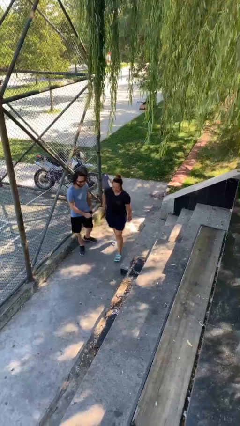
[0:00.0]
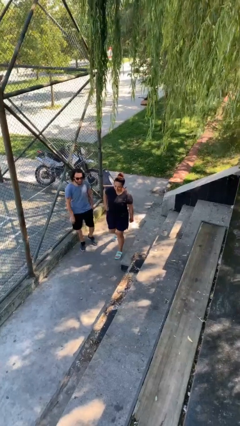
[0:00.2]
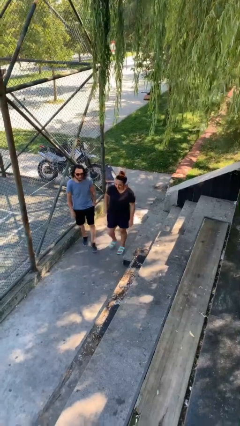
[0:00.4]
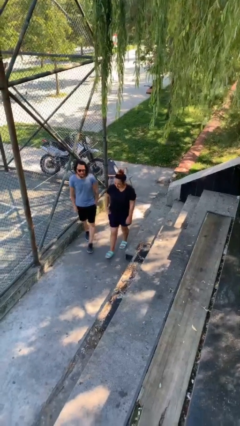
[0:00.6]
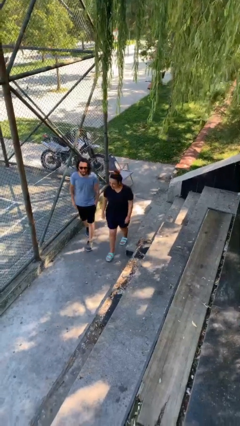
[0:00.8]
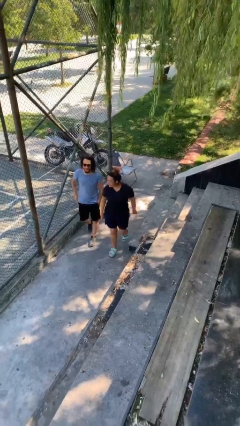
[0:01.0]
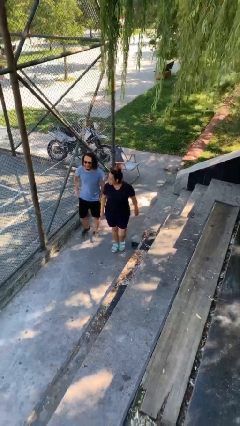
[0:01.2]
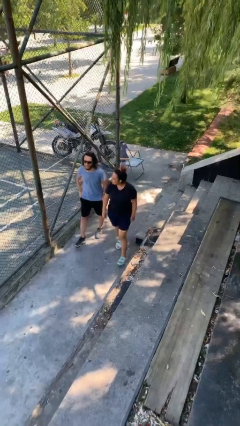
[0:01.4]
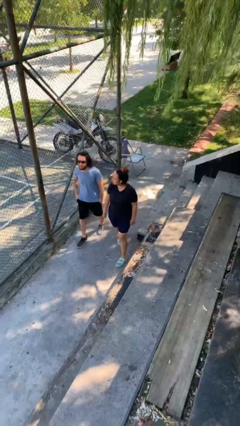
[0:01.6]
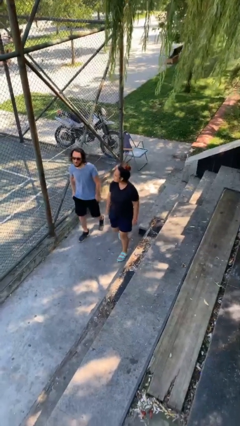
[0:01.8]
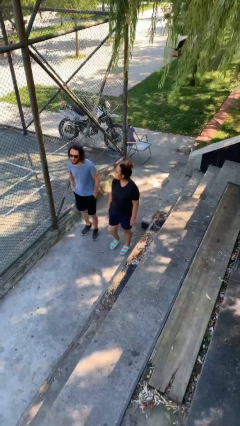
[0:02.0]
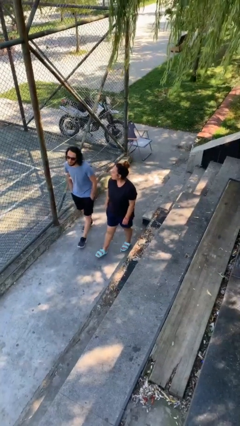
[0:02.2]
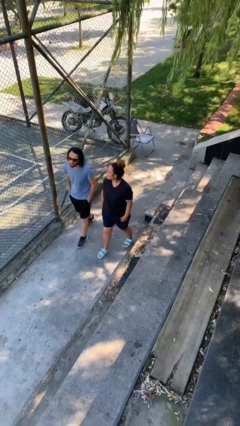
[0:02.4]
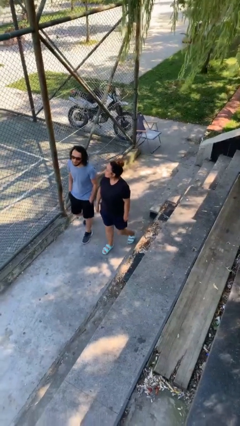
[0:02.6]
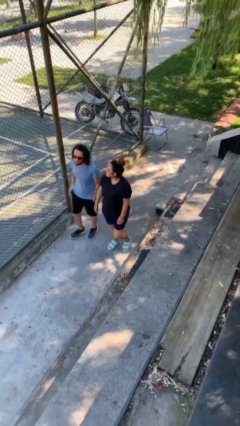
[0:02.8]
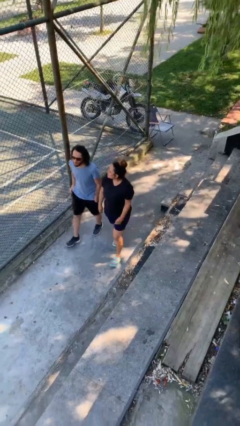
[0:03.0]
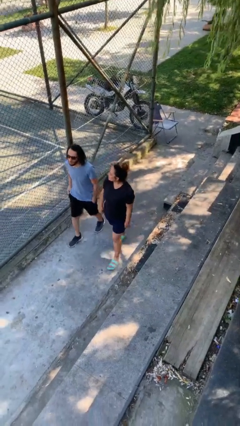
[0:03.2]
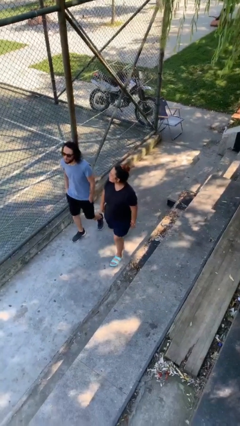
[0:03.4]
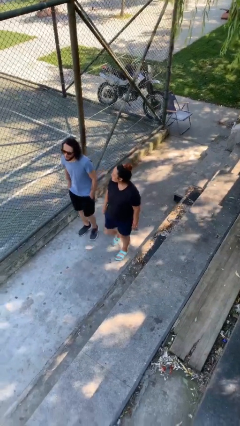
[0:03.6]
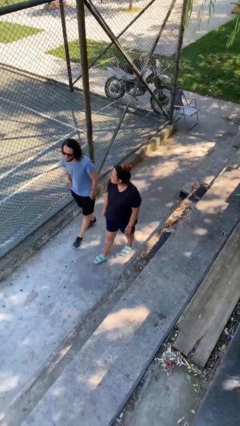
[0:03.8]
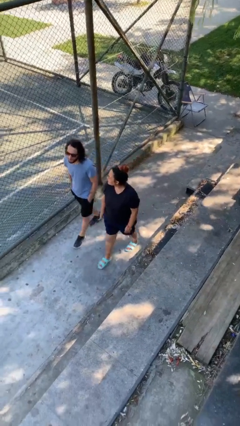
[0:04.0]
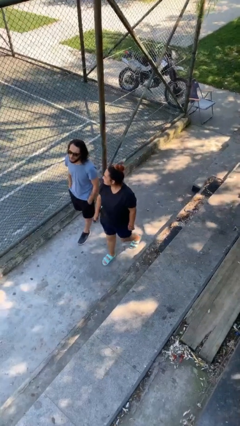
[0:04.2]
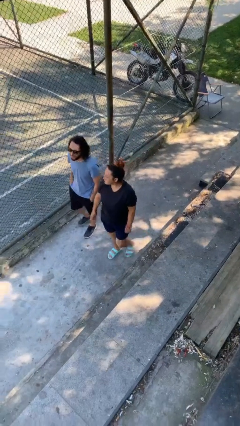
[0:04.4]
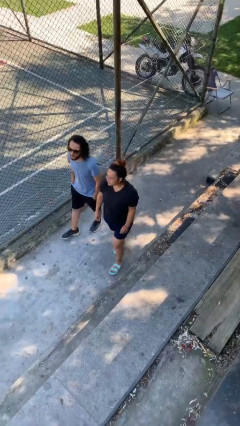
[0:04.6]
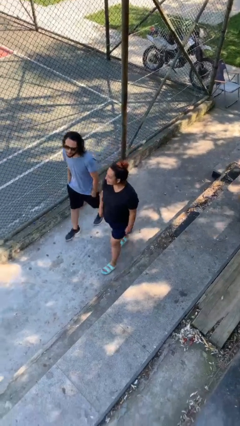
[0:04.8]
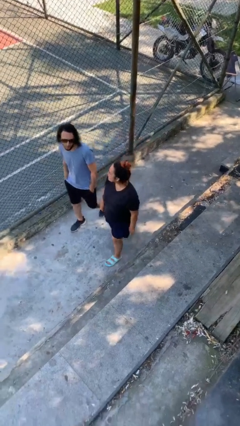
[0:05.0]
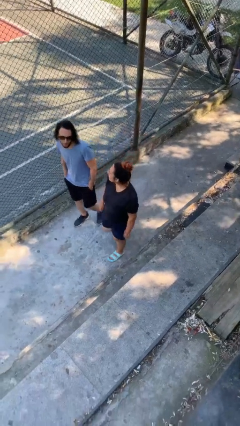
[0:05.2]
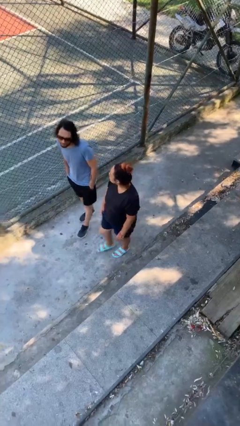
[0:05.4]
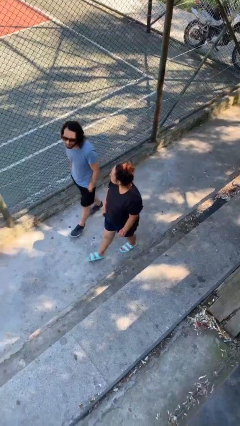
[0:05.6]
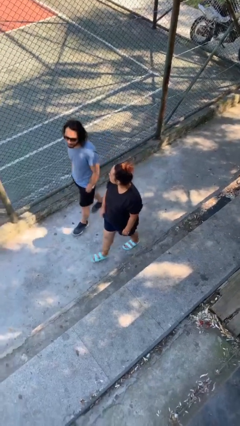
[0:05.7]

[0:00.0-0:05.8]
person talks to person

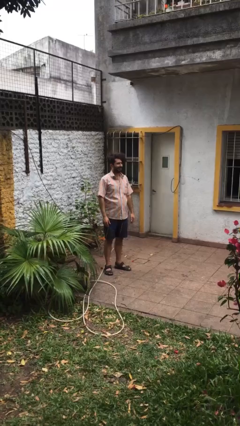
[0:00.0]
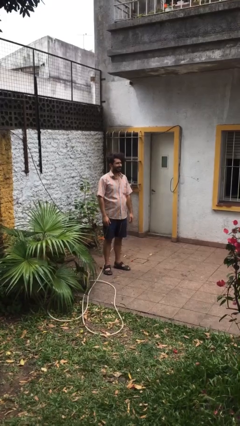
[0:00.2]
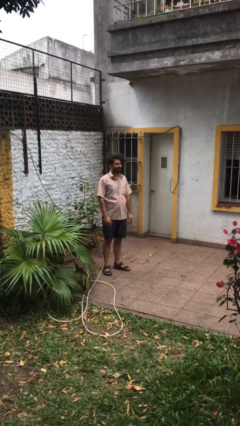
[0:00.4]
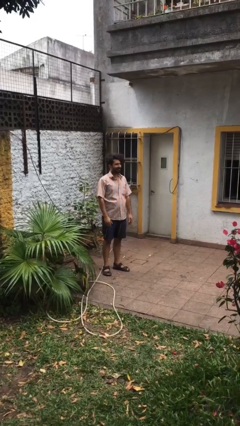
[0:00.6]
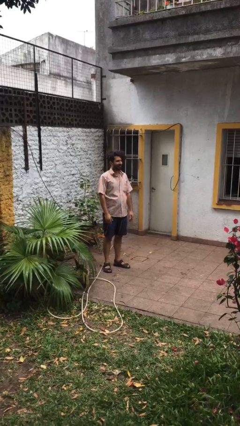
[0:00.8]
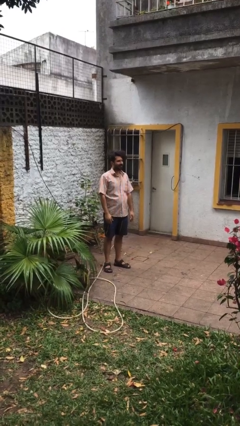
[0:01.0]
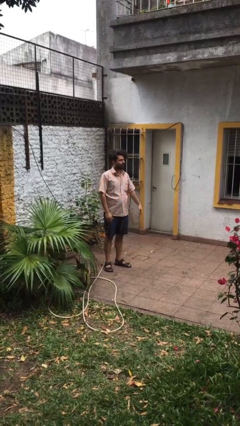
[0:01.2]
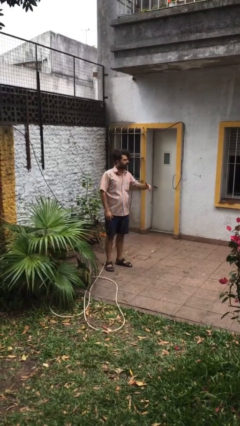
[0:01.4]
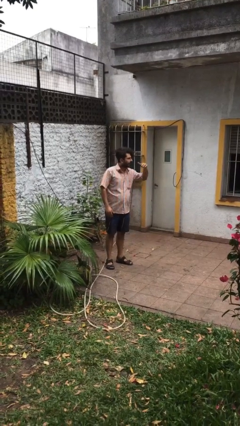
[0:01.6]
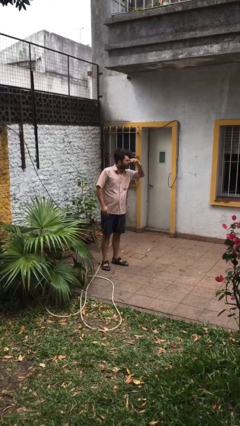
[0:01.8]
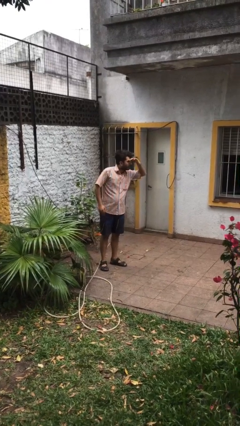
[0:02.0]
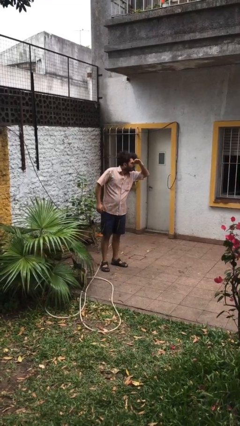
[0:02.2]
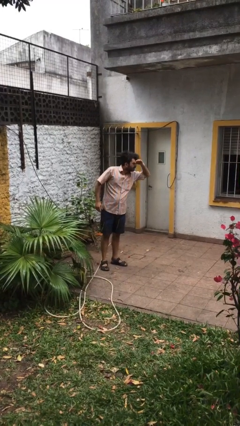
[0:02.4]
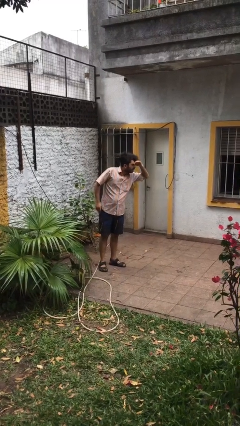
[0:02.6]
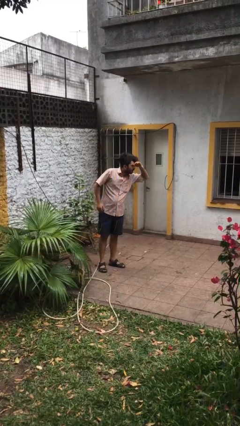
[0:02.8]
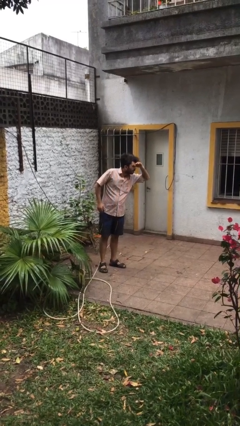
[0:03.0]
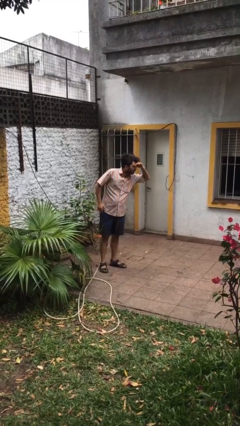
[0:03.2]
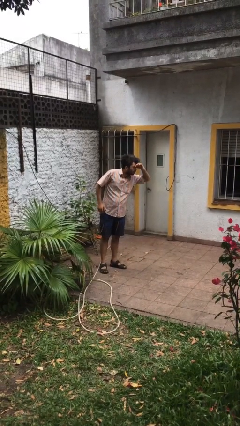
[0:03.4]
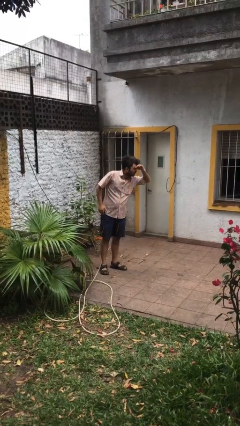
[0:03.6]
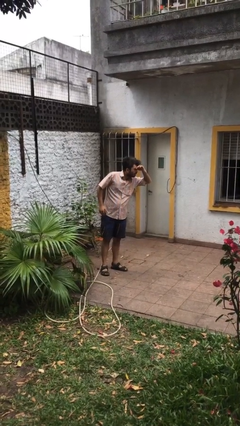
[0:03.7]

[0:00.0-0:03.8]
person shades eyes

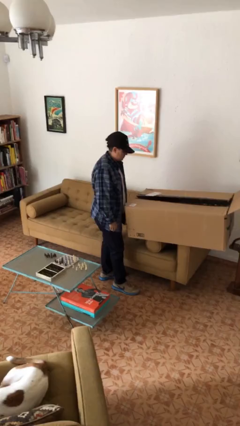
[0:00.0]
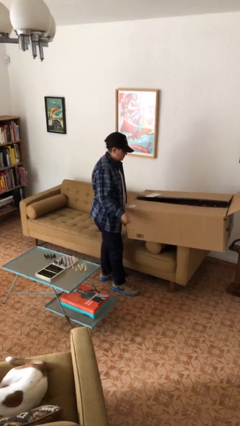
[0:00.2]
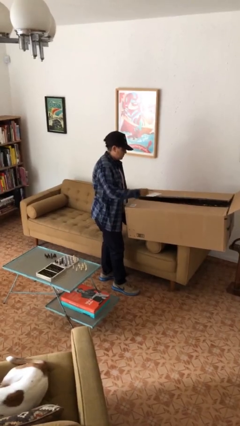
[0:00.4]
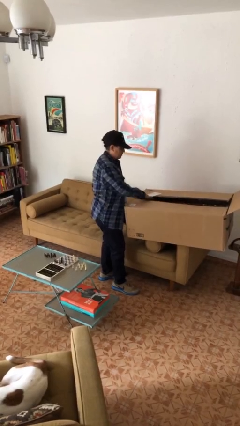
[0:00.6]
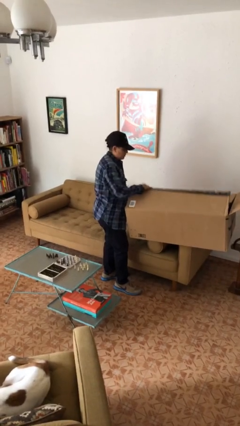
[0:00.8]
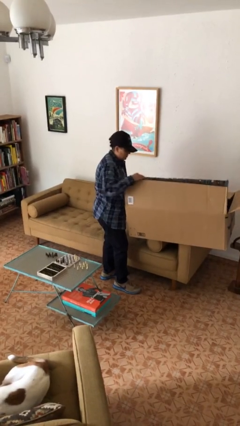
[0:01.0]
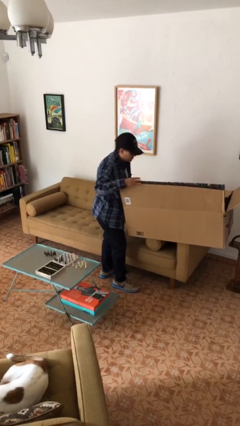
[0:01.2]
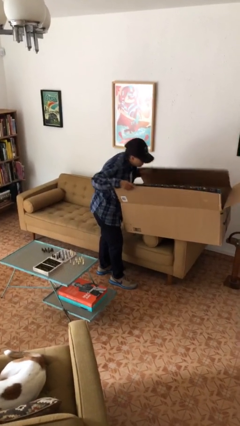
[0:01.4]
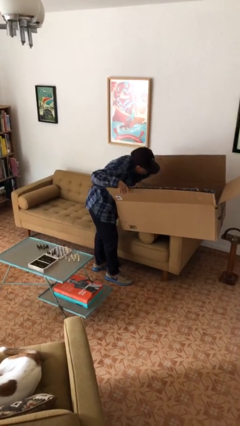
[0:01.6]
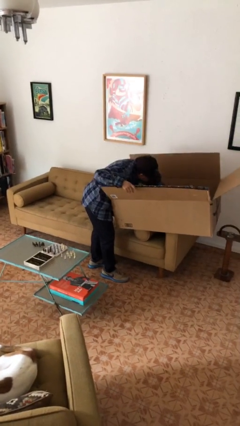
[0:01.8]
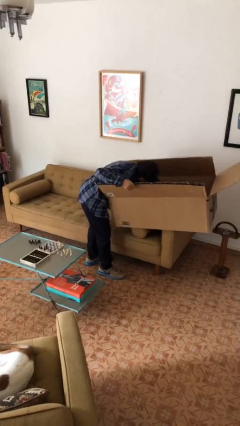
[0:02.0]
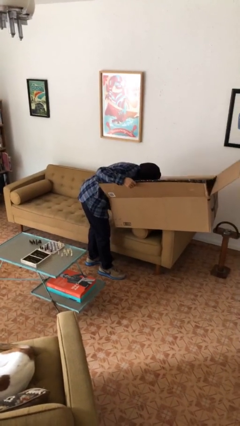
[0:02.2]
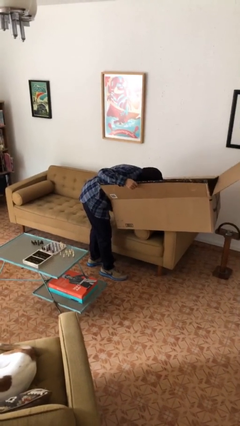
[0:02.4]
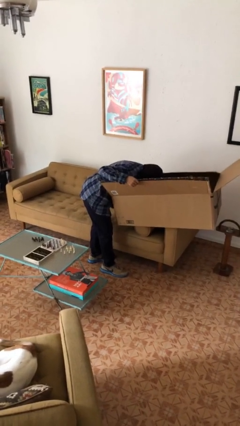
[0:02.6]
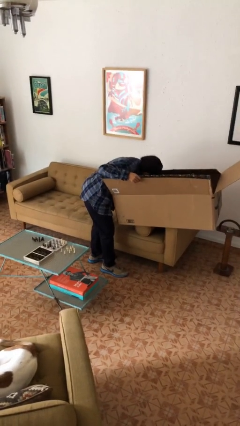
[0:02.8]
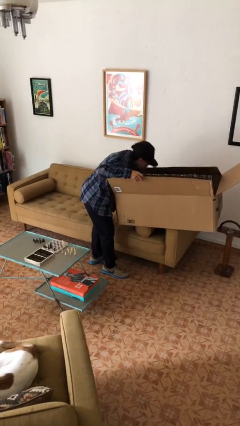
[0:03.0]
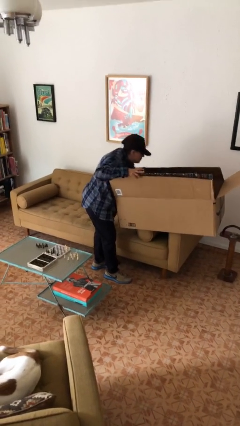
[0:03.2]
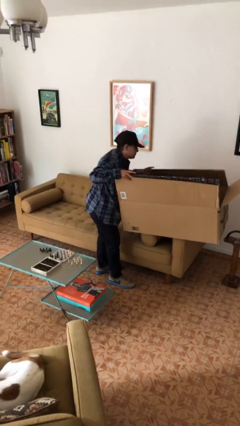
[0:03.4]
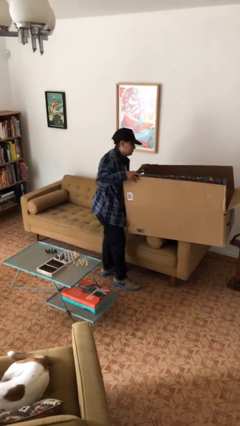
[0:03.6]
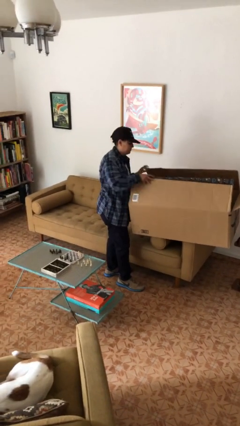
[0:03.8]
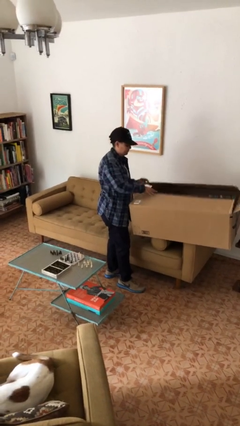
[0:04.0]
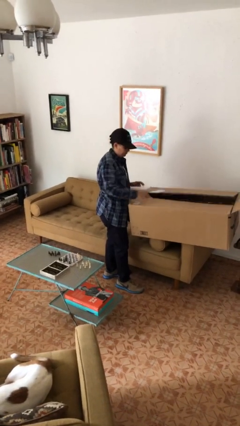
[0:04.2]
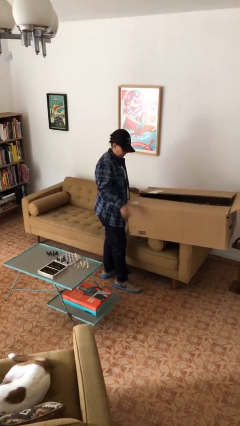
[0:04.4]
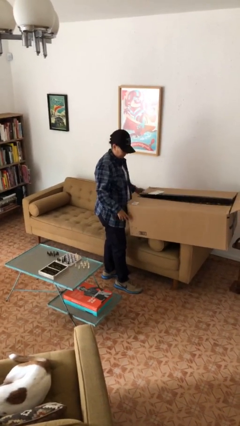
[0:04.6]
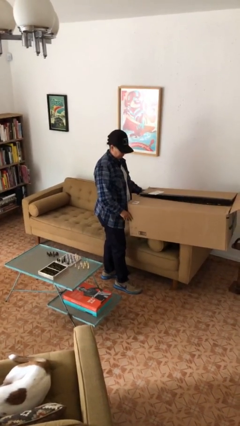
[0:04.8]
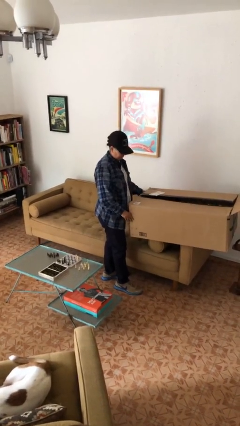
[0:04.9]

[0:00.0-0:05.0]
person searches in box

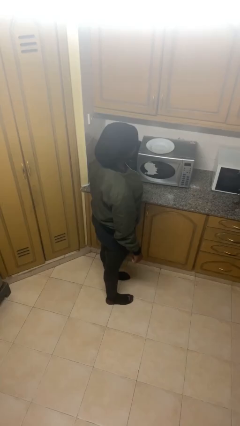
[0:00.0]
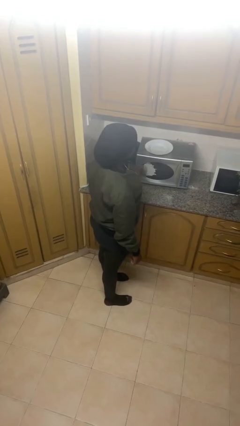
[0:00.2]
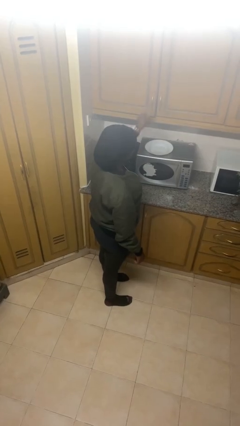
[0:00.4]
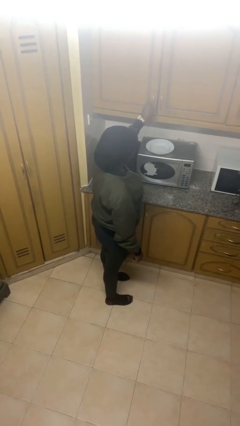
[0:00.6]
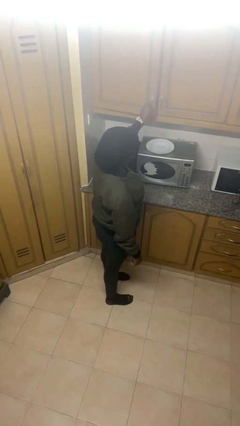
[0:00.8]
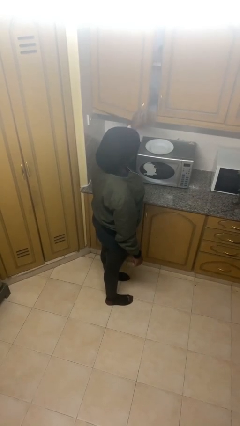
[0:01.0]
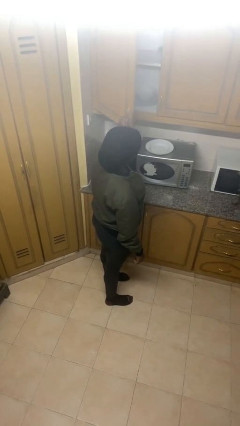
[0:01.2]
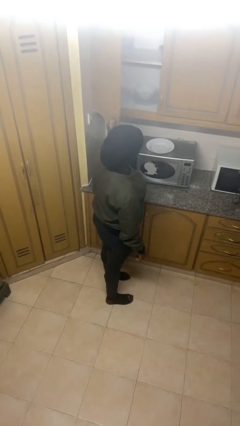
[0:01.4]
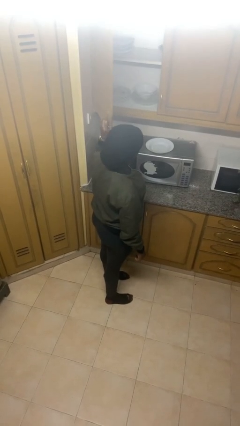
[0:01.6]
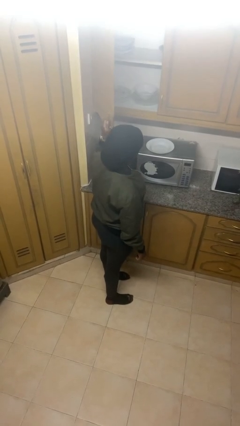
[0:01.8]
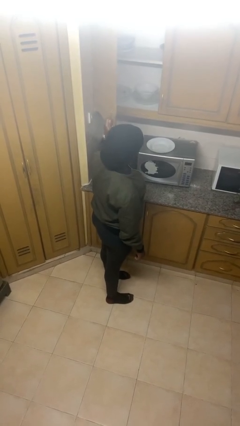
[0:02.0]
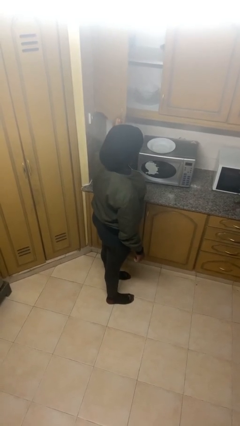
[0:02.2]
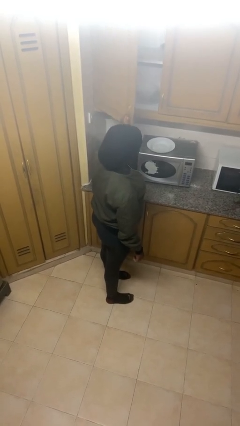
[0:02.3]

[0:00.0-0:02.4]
person opens cabinet

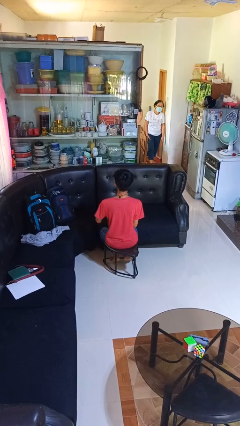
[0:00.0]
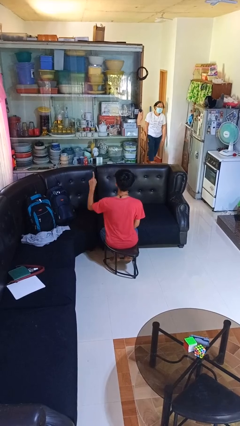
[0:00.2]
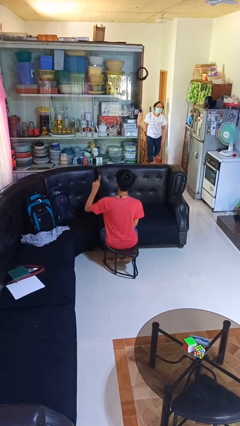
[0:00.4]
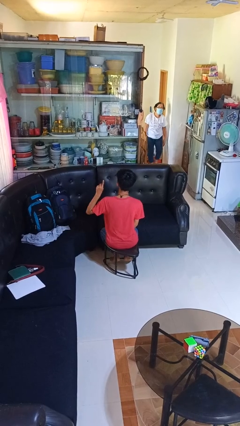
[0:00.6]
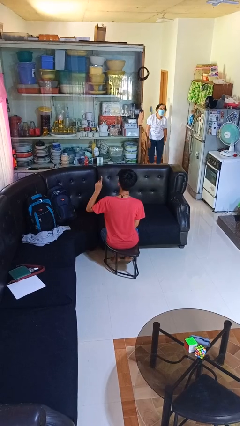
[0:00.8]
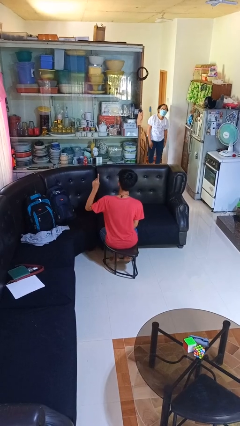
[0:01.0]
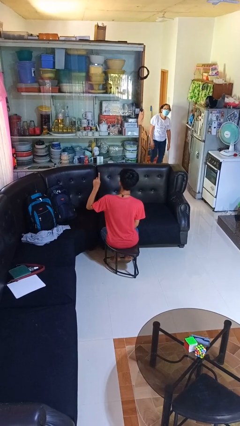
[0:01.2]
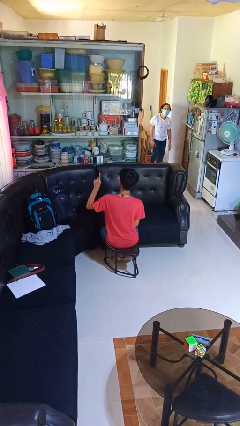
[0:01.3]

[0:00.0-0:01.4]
person gestures number one
